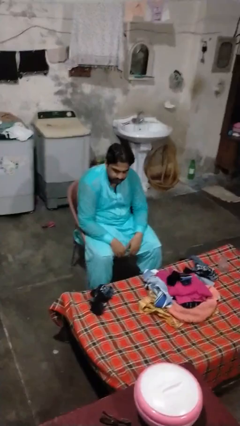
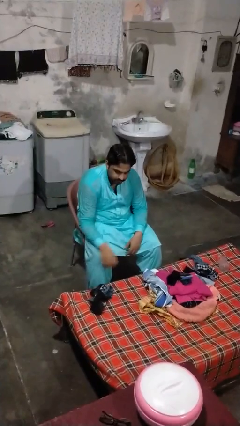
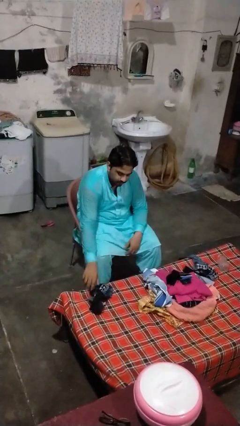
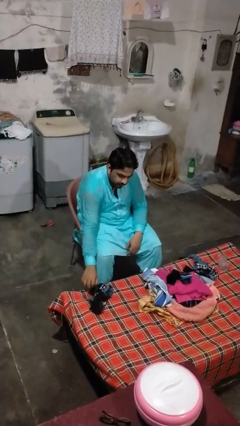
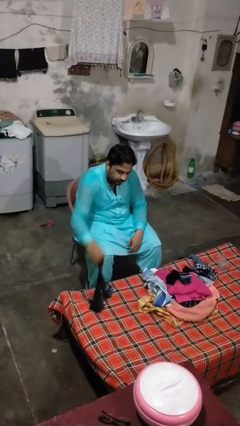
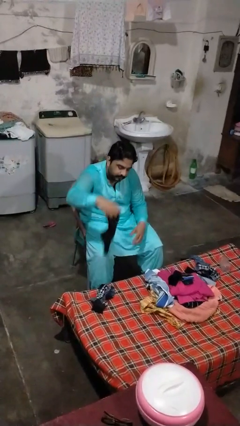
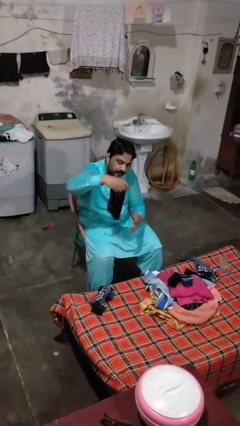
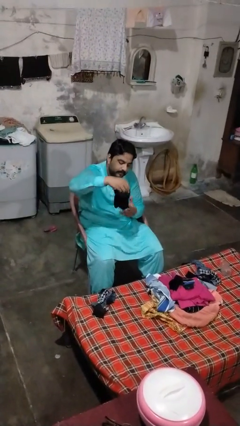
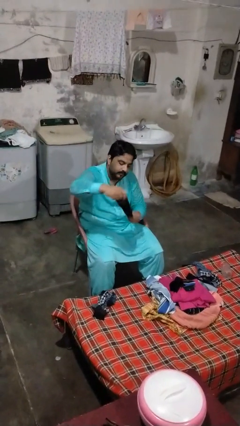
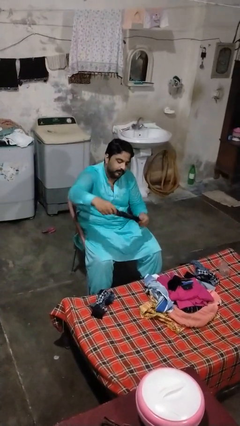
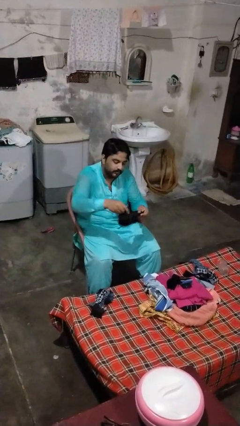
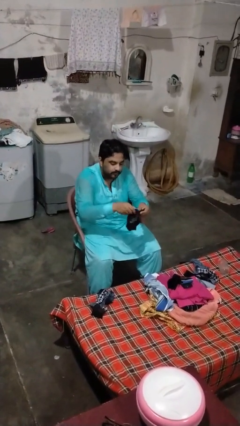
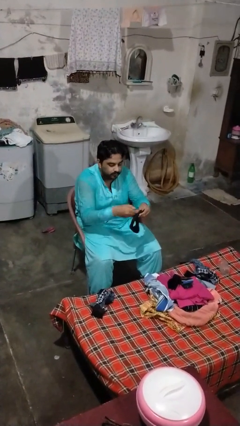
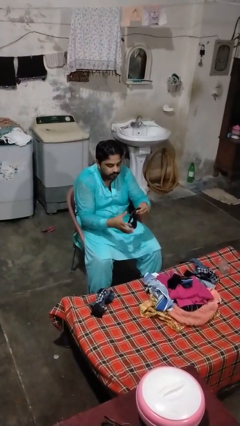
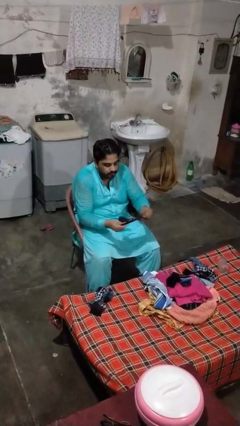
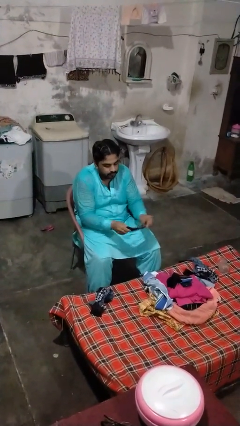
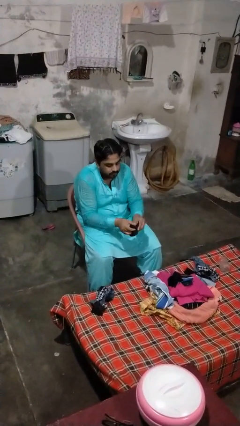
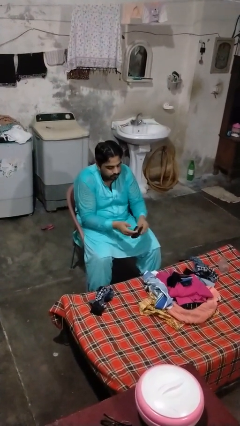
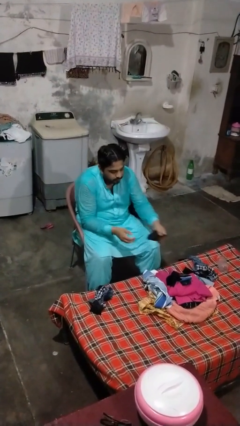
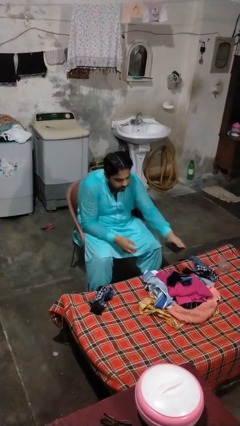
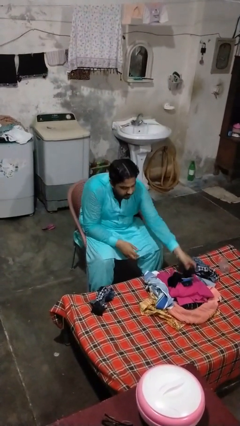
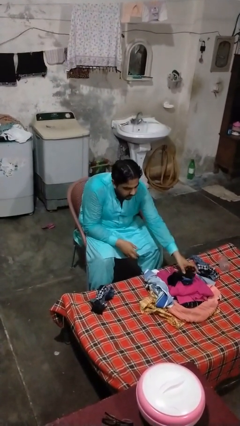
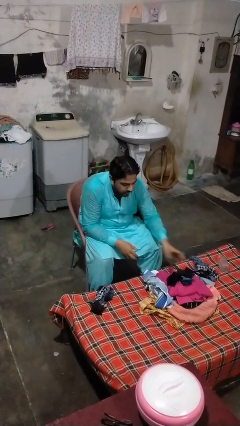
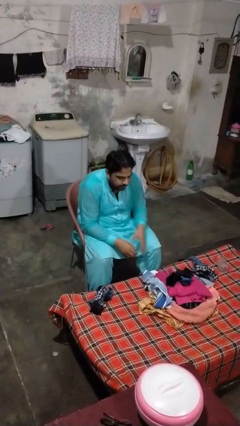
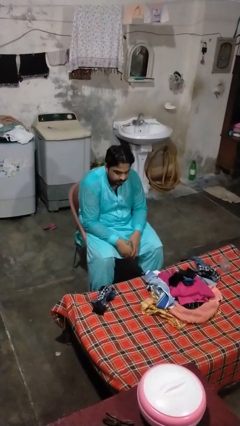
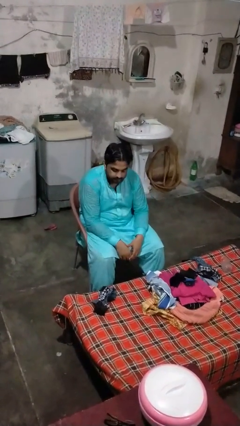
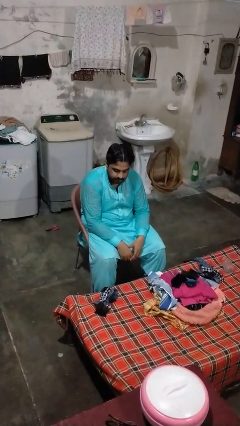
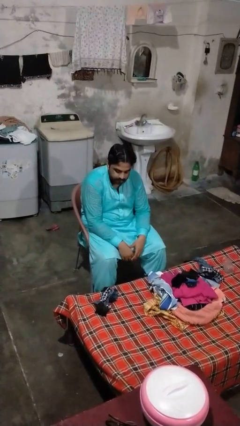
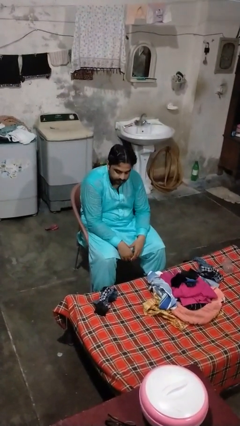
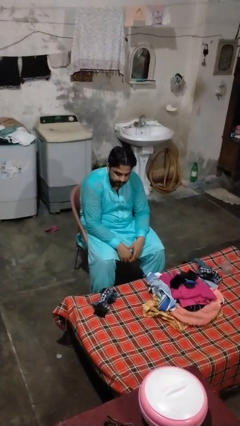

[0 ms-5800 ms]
person folds socks

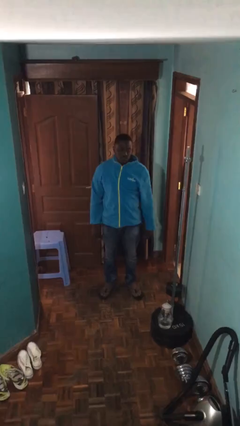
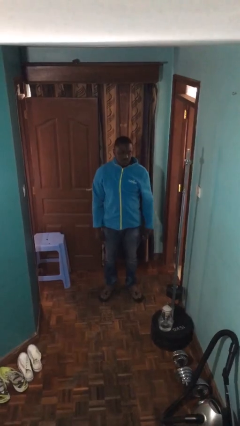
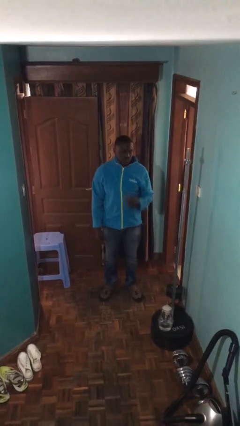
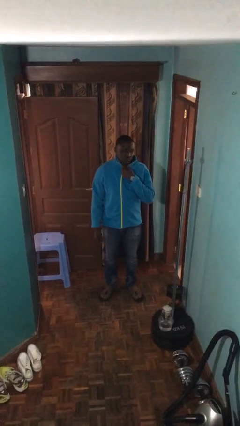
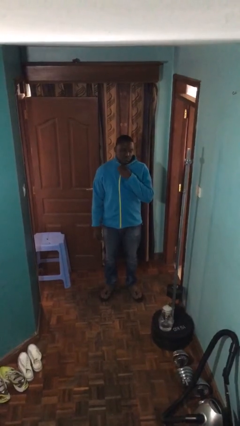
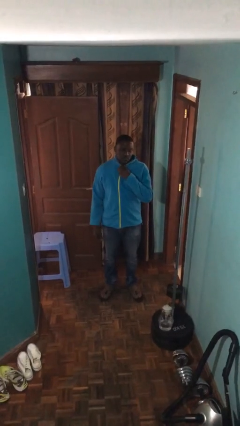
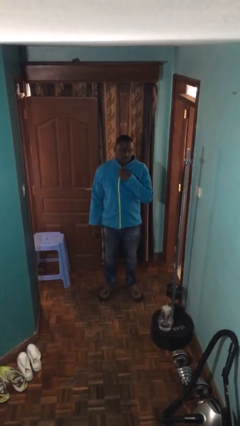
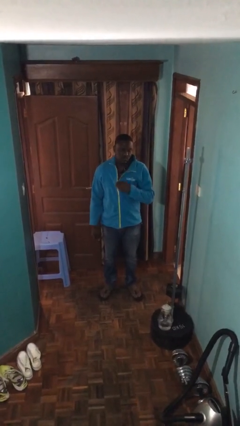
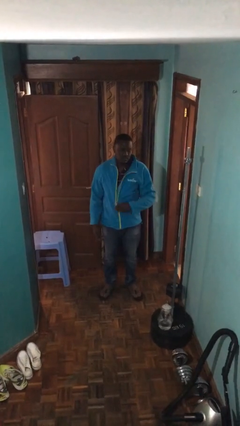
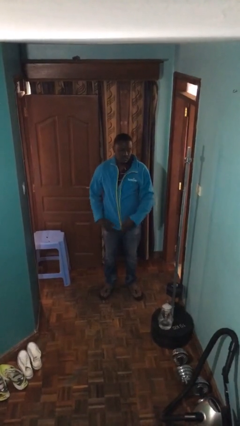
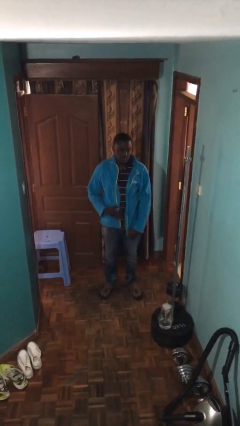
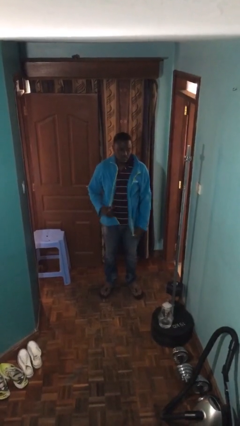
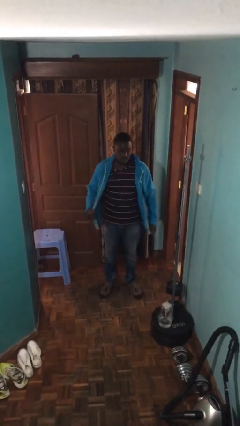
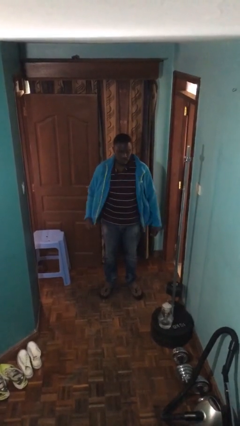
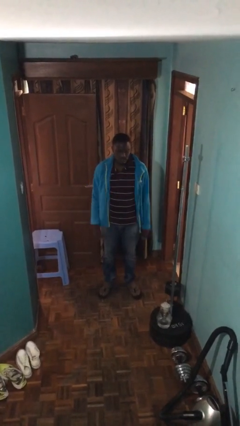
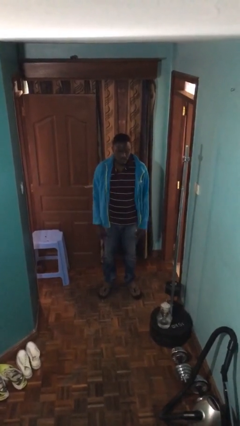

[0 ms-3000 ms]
person unzips jacket

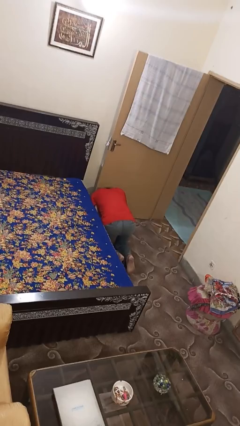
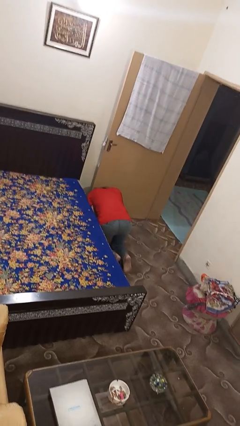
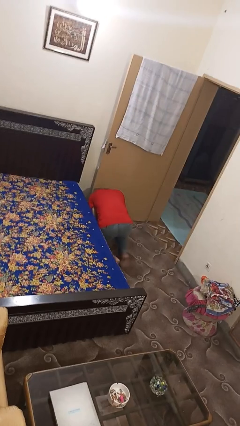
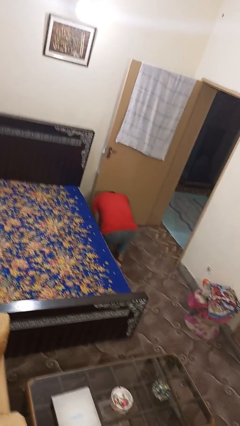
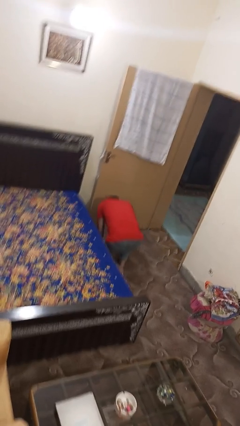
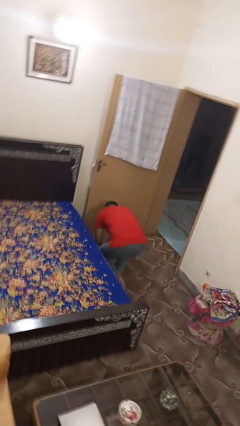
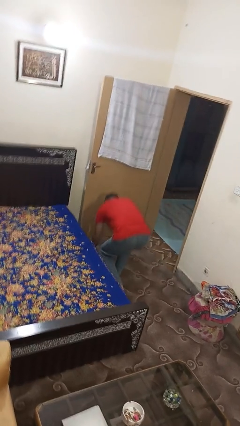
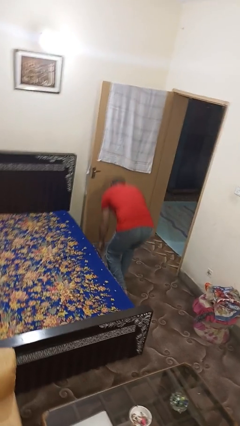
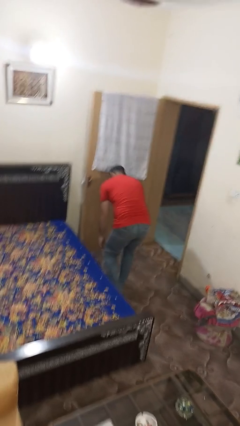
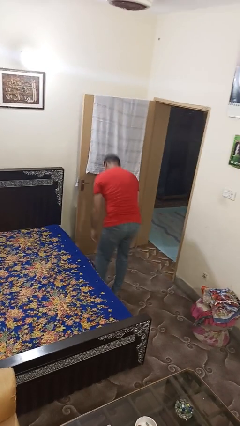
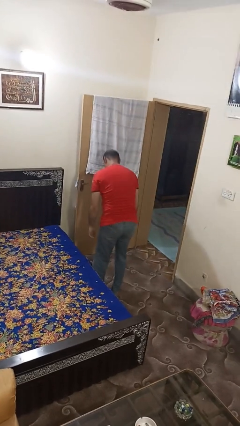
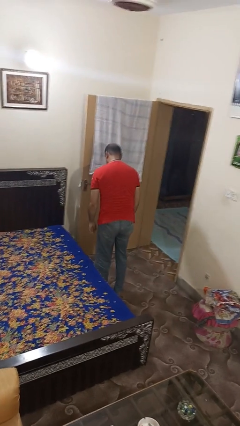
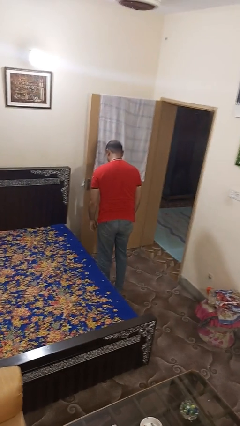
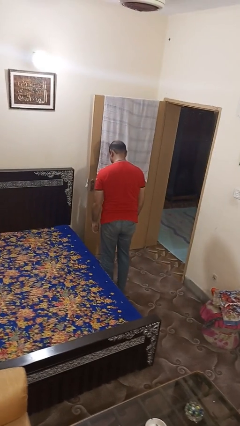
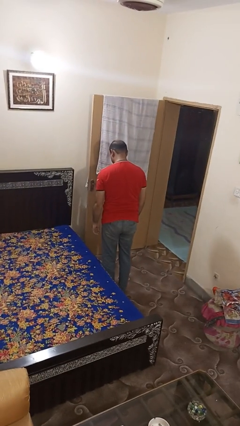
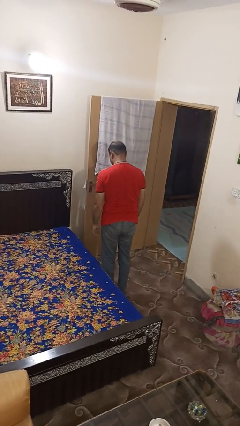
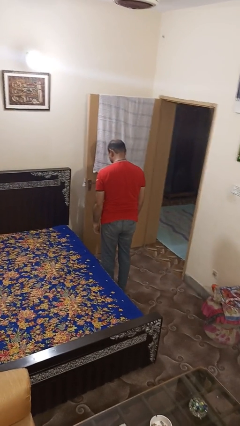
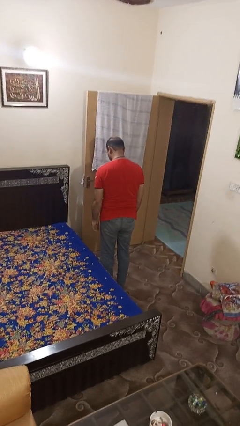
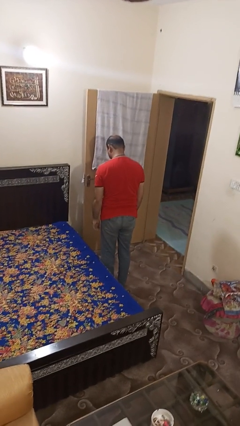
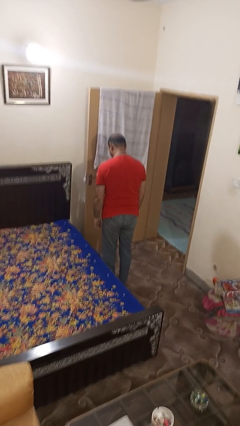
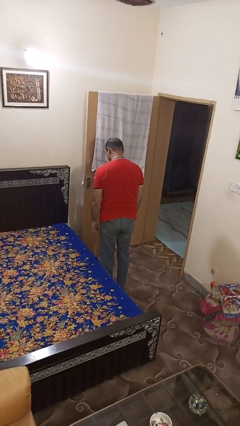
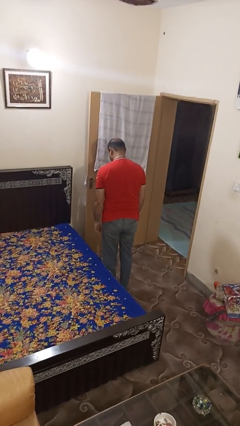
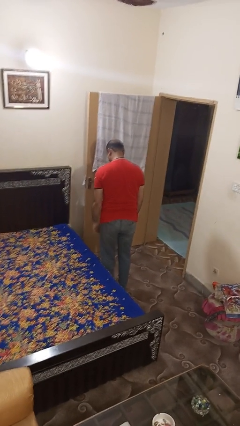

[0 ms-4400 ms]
person stands up from floor

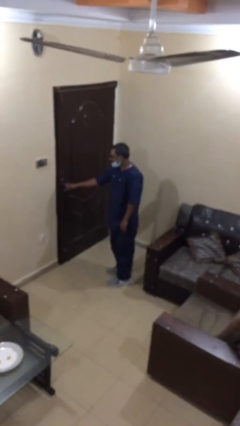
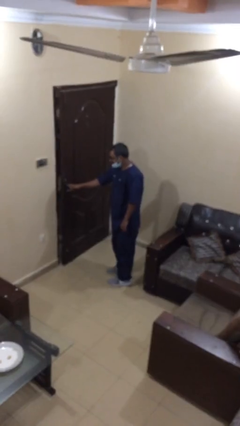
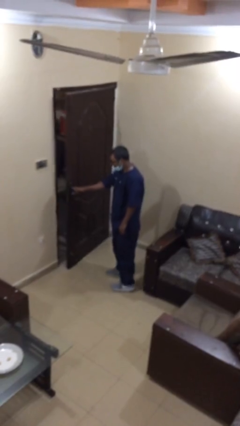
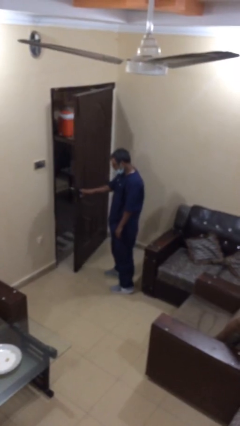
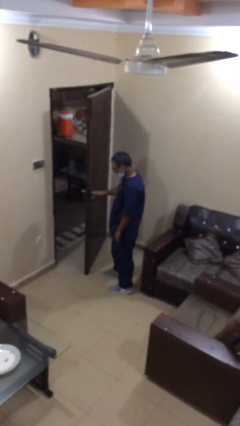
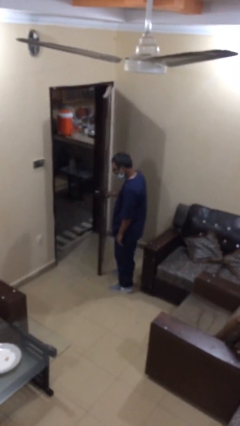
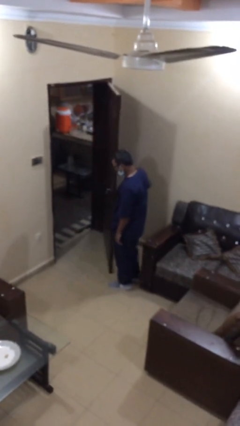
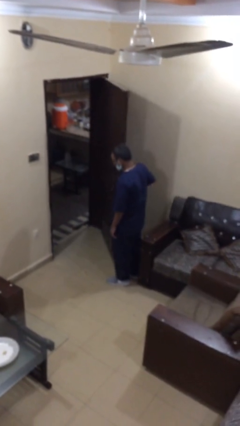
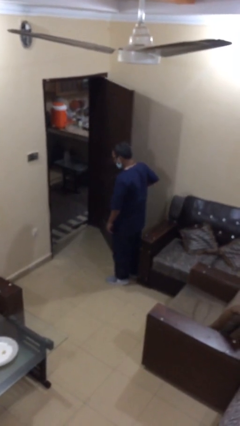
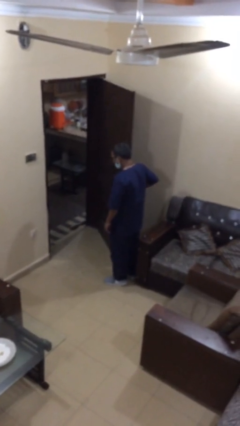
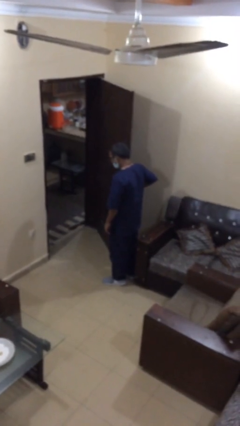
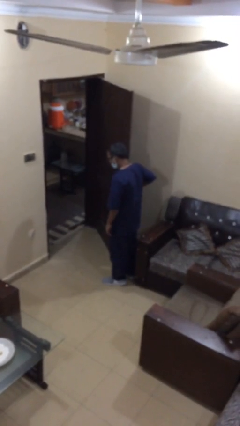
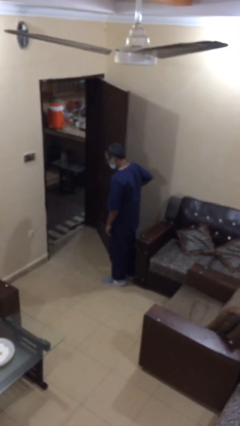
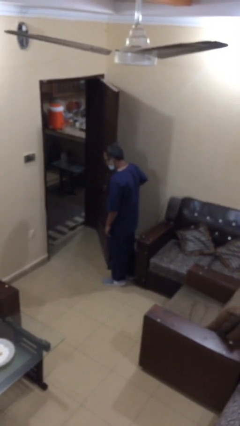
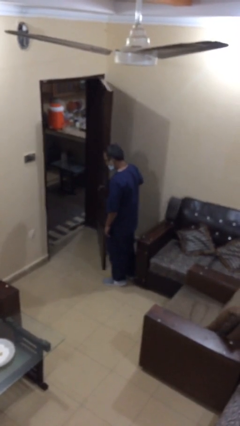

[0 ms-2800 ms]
person opens facility door

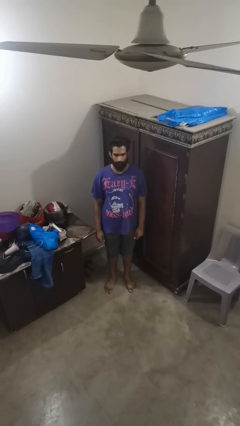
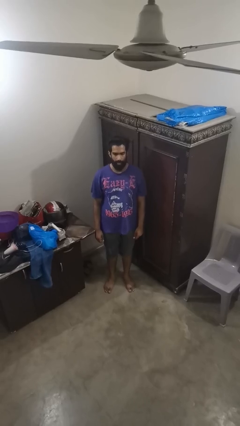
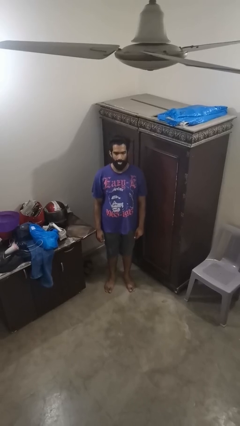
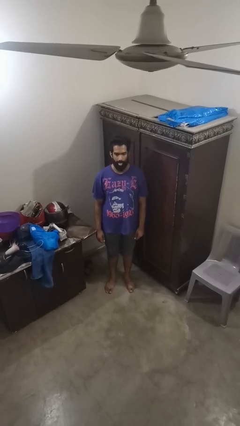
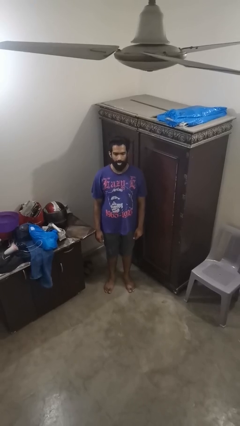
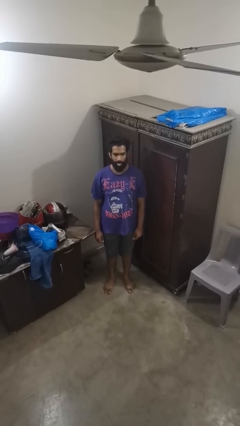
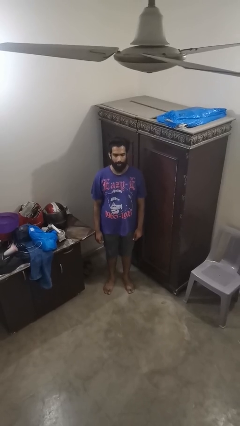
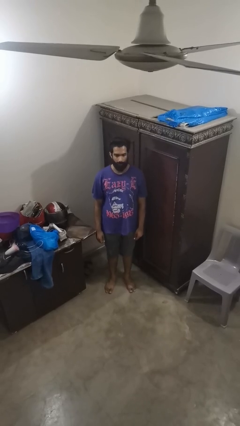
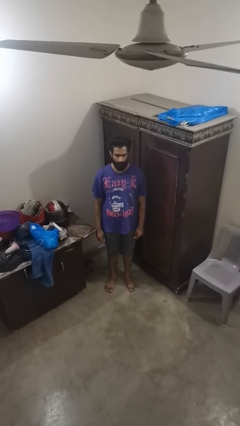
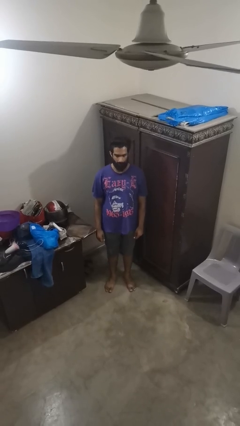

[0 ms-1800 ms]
person sticks out tongue

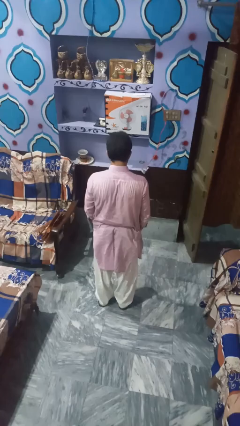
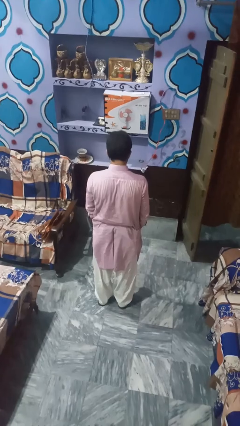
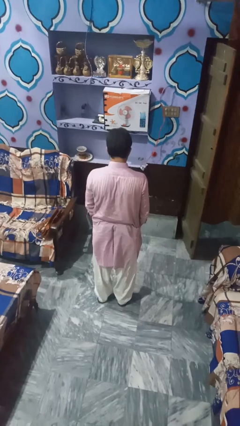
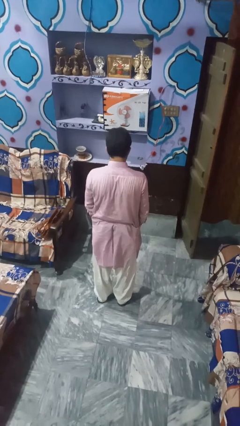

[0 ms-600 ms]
person catches dropped object
